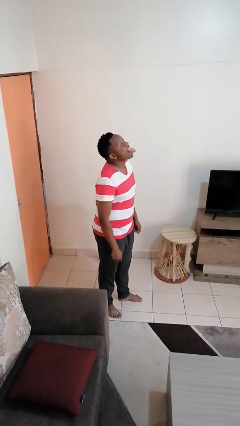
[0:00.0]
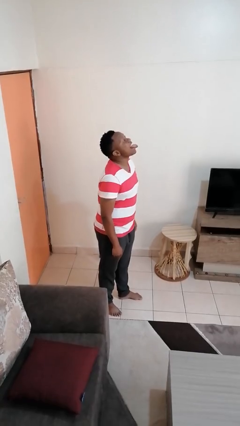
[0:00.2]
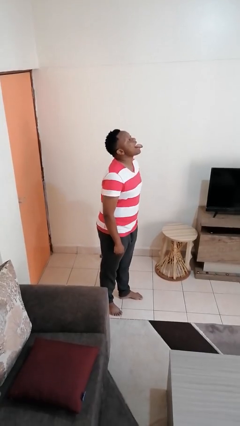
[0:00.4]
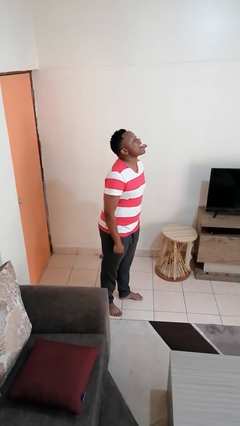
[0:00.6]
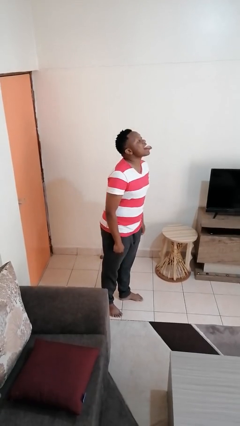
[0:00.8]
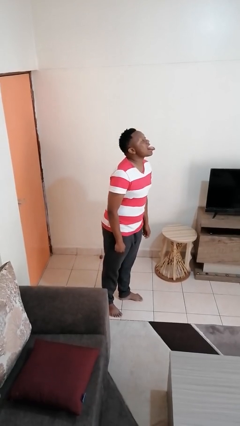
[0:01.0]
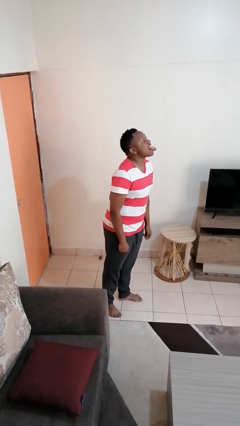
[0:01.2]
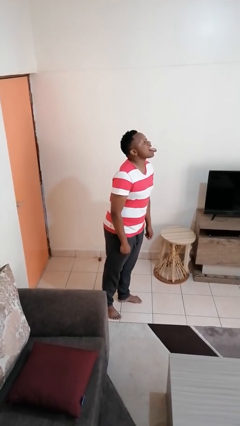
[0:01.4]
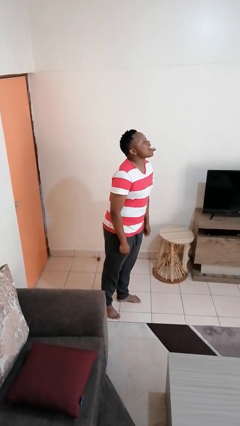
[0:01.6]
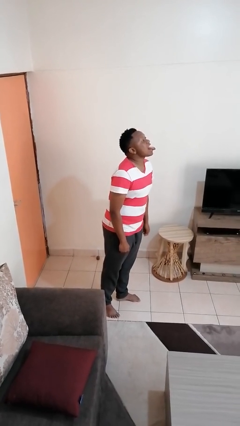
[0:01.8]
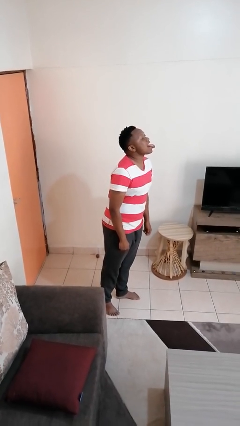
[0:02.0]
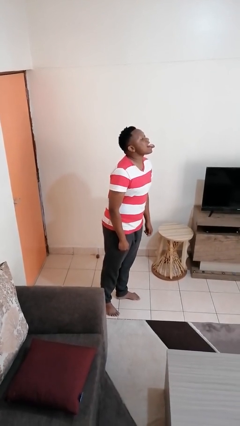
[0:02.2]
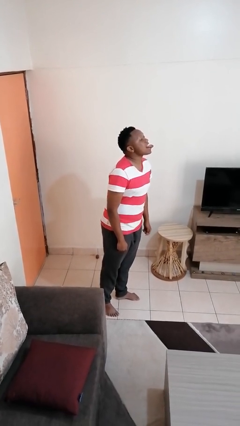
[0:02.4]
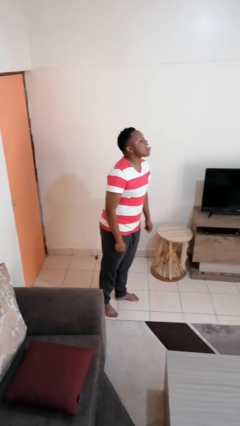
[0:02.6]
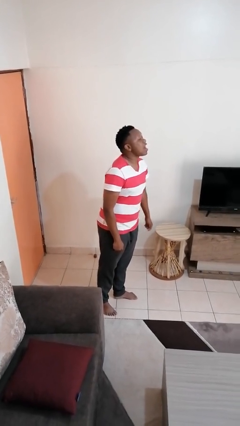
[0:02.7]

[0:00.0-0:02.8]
person sticks out tongue

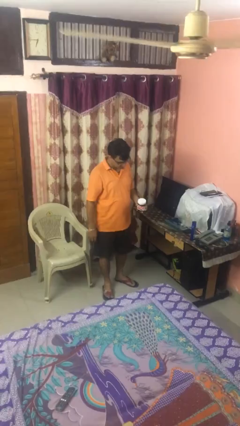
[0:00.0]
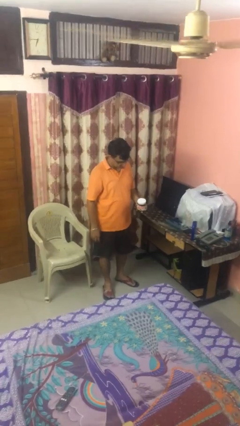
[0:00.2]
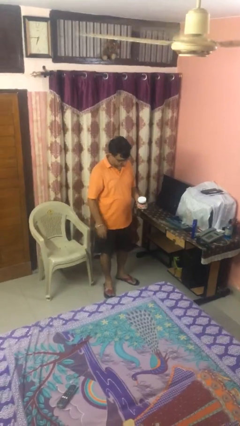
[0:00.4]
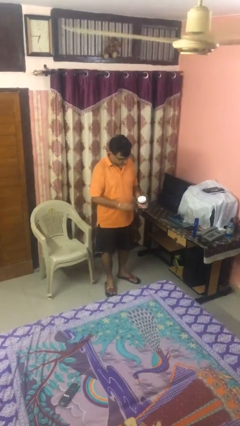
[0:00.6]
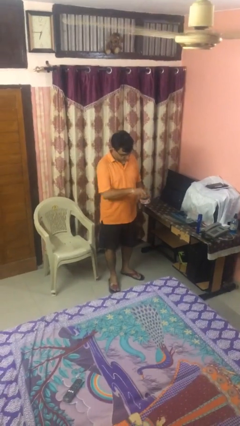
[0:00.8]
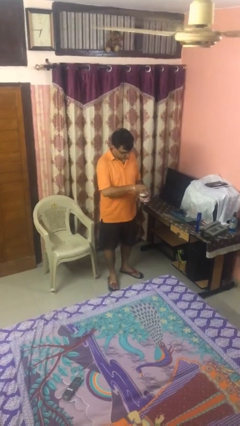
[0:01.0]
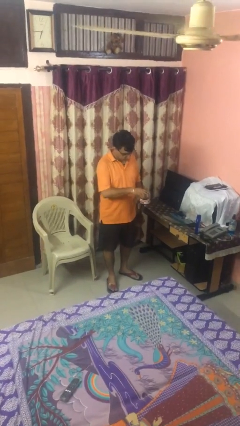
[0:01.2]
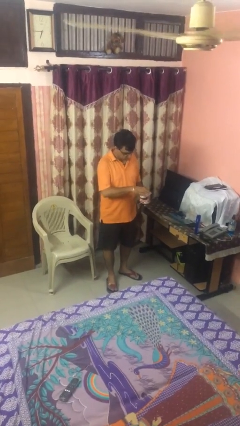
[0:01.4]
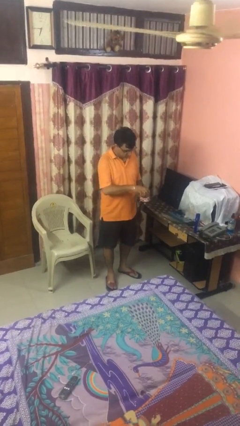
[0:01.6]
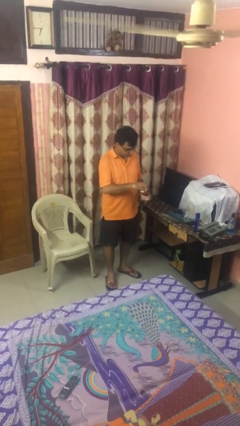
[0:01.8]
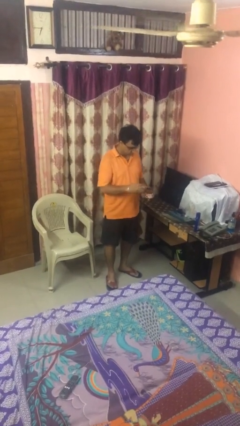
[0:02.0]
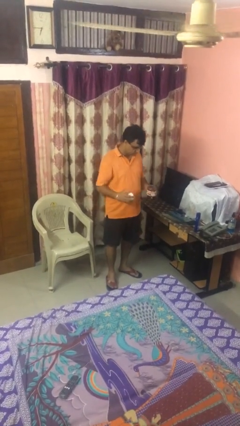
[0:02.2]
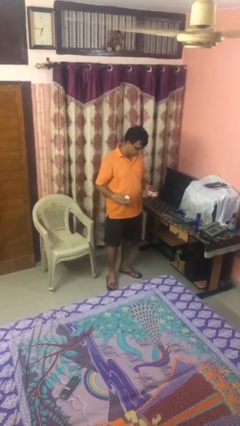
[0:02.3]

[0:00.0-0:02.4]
person opens jar

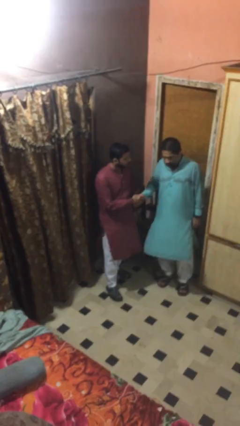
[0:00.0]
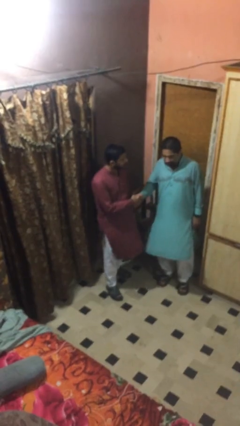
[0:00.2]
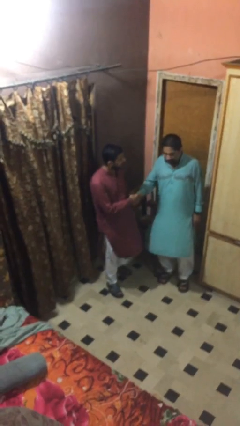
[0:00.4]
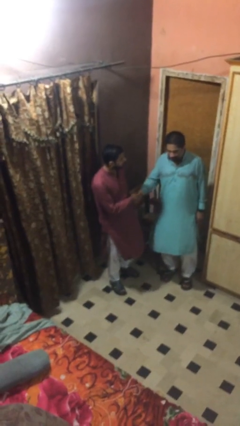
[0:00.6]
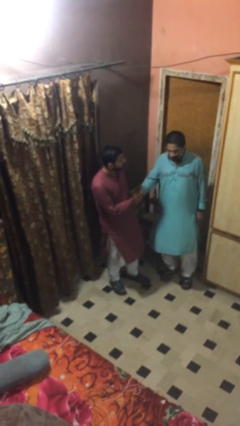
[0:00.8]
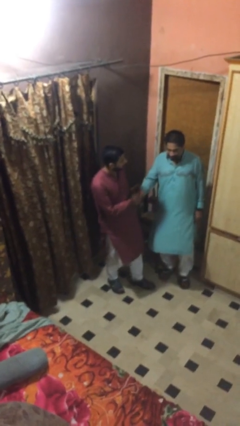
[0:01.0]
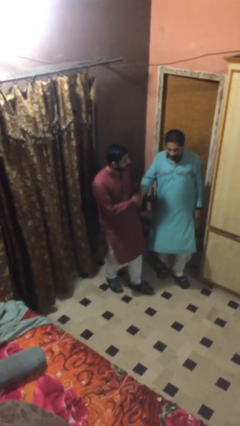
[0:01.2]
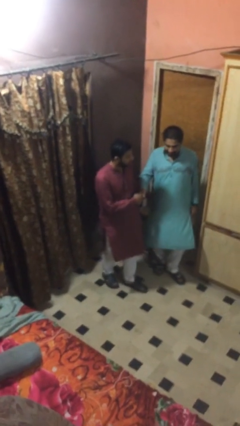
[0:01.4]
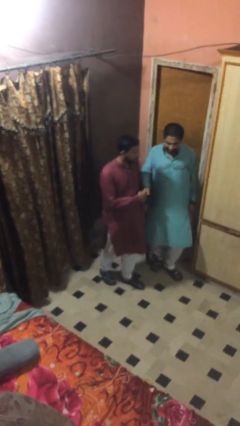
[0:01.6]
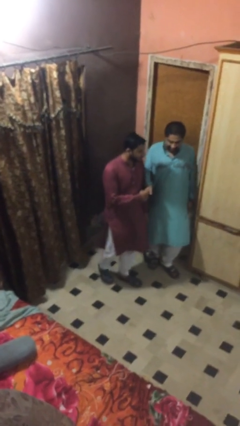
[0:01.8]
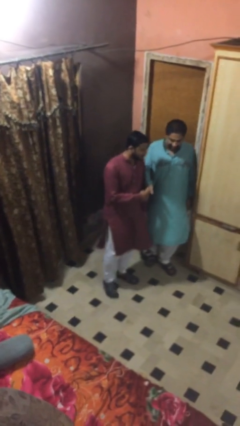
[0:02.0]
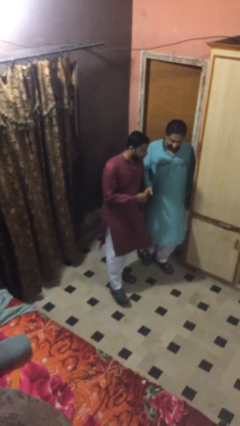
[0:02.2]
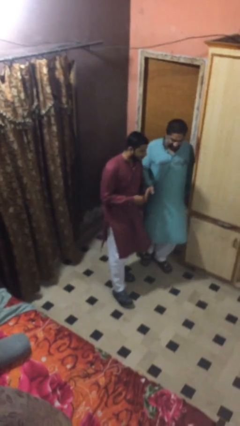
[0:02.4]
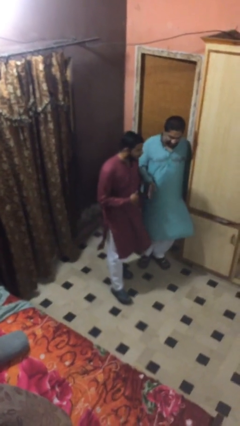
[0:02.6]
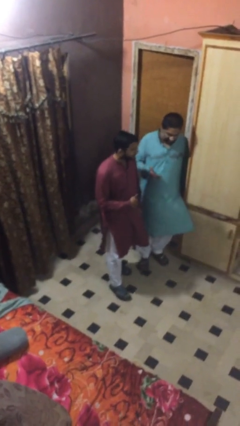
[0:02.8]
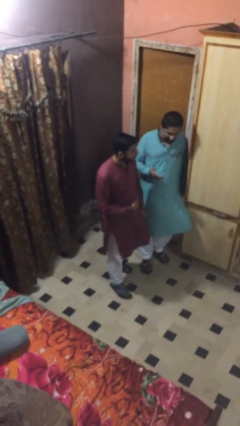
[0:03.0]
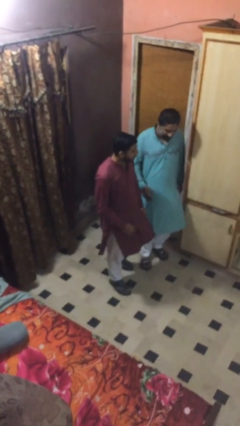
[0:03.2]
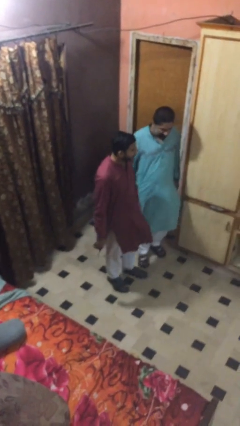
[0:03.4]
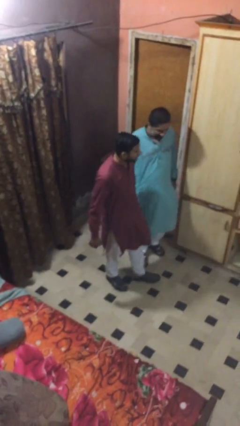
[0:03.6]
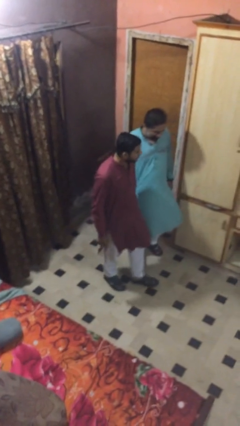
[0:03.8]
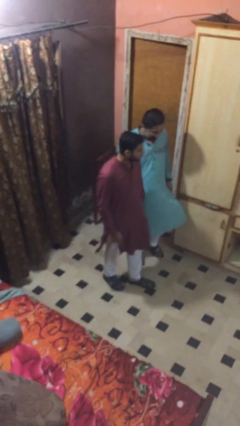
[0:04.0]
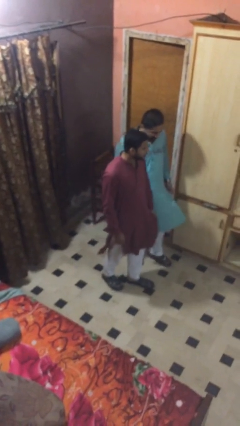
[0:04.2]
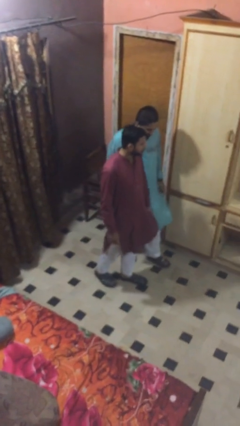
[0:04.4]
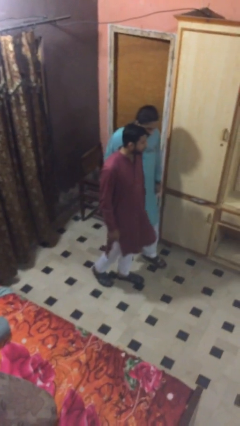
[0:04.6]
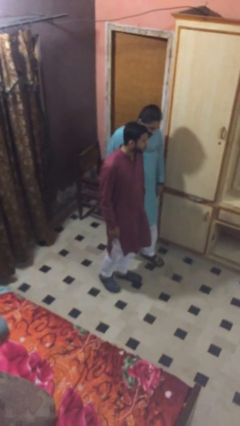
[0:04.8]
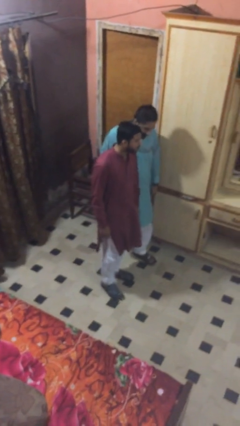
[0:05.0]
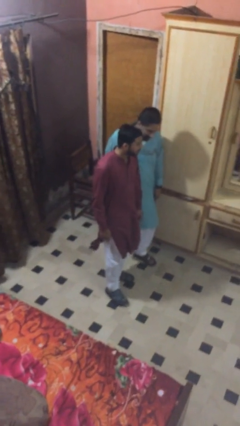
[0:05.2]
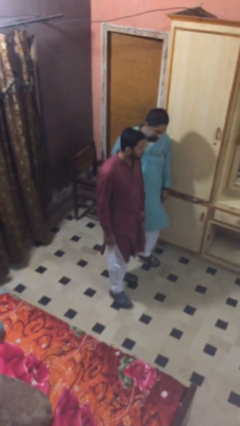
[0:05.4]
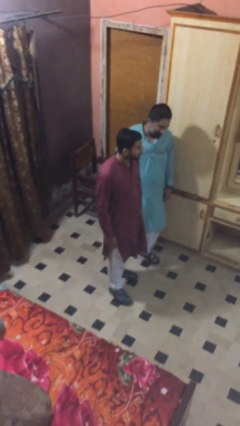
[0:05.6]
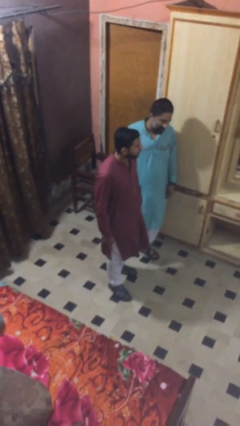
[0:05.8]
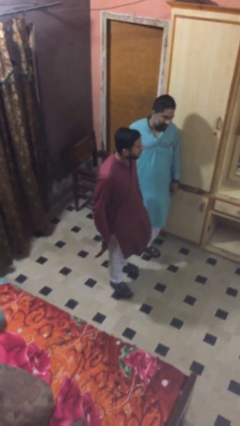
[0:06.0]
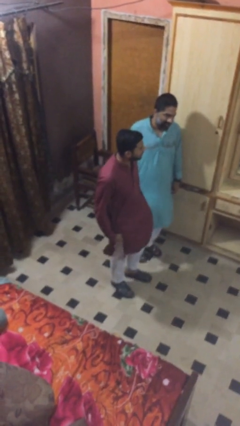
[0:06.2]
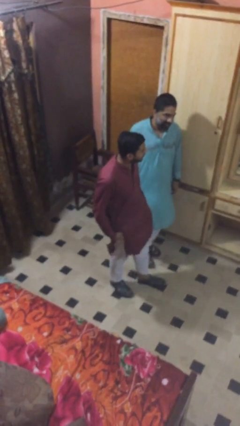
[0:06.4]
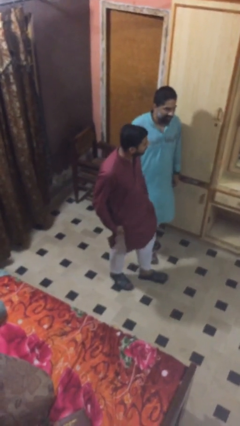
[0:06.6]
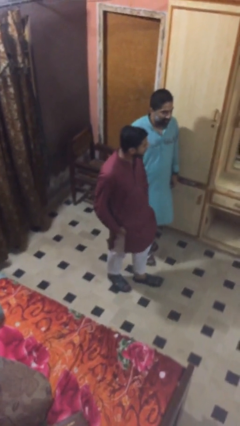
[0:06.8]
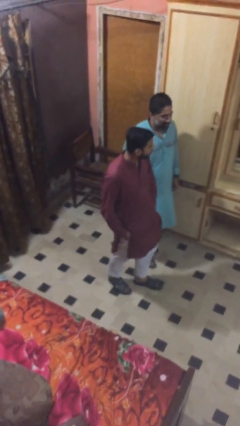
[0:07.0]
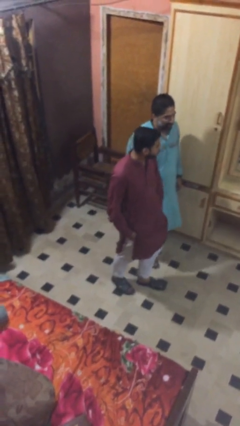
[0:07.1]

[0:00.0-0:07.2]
person talks to person

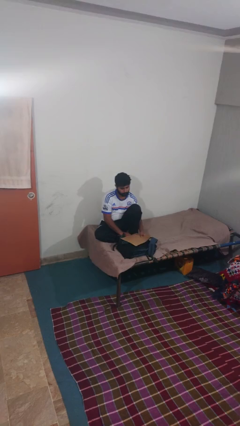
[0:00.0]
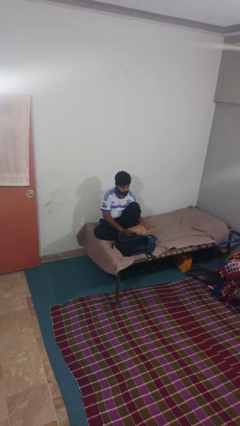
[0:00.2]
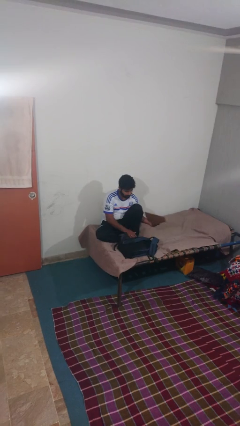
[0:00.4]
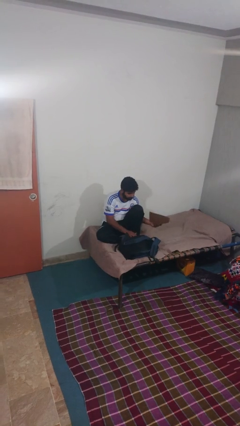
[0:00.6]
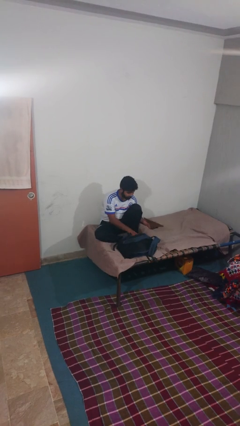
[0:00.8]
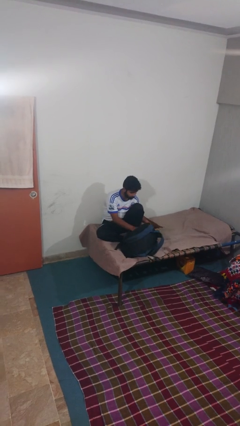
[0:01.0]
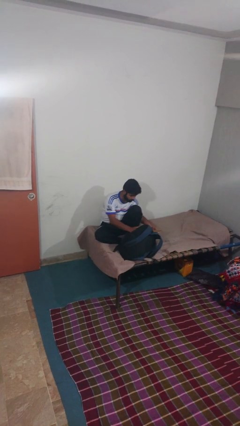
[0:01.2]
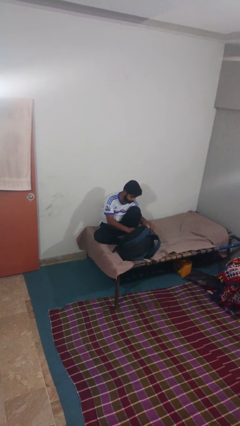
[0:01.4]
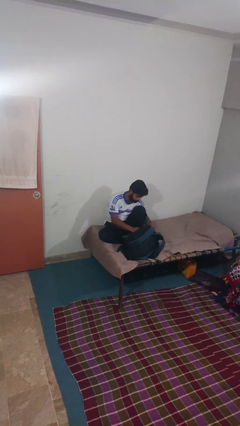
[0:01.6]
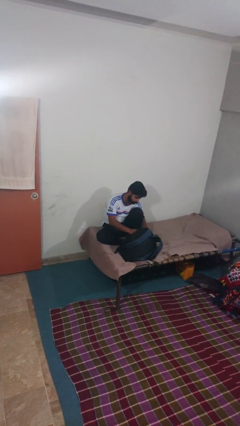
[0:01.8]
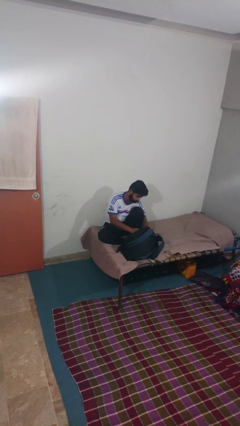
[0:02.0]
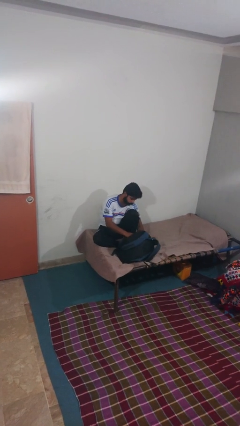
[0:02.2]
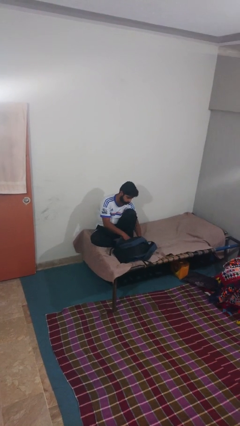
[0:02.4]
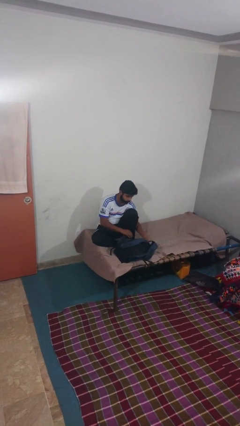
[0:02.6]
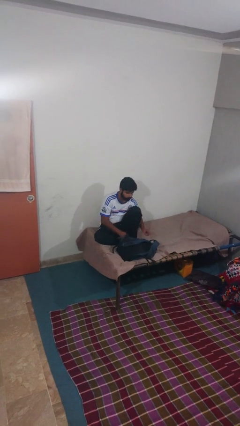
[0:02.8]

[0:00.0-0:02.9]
person puts object into backpack

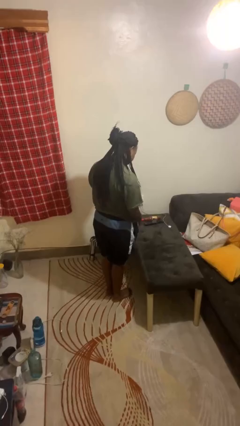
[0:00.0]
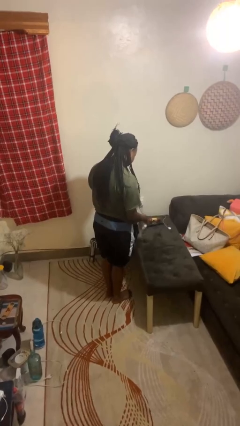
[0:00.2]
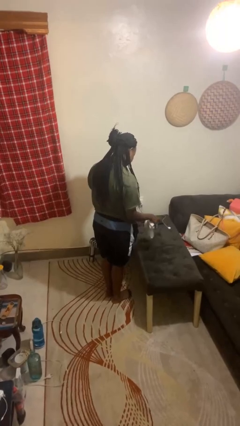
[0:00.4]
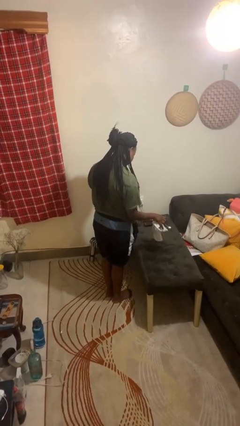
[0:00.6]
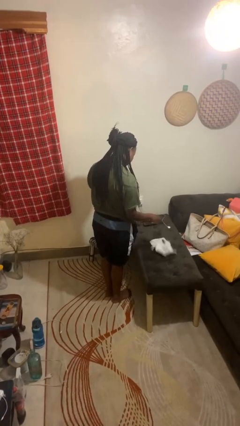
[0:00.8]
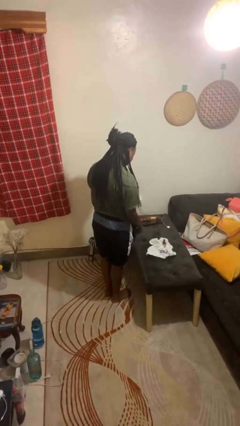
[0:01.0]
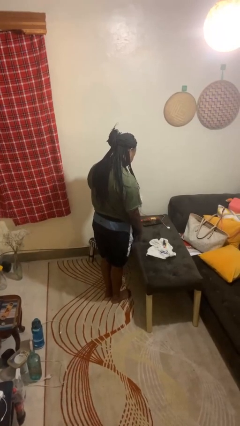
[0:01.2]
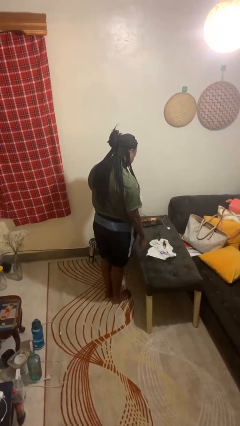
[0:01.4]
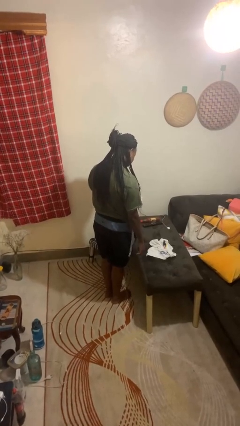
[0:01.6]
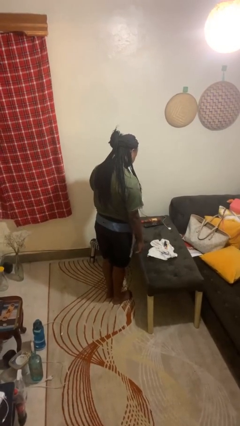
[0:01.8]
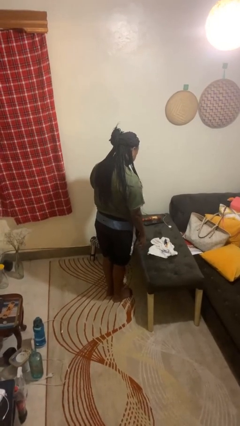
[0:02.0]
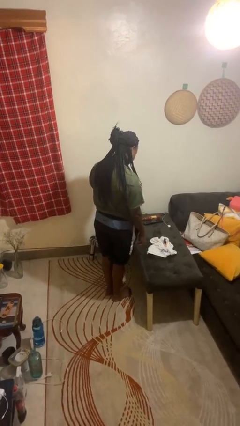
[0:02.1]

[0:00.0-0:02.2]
person throws object on table
